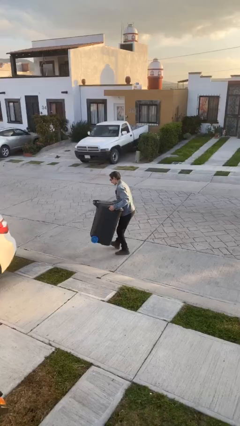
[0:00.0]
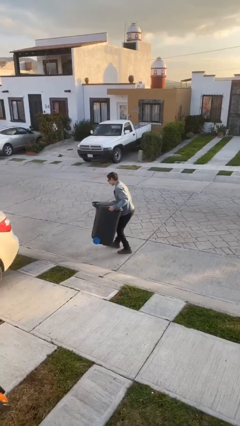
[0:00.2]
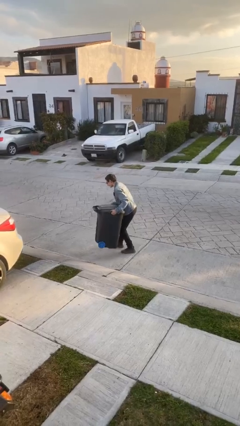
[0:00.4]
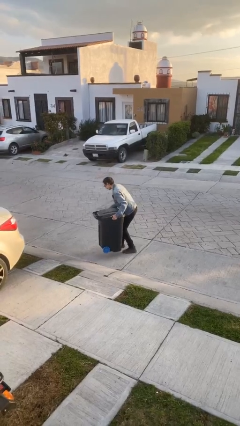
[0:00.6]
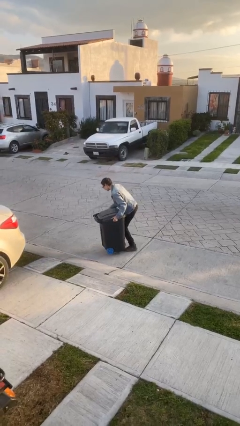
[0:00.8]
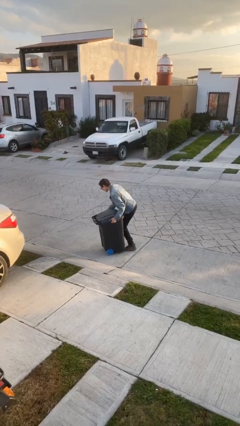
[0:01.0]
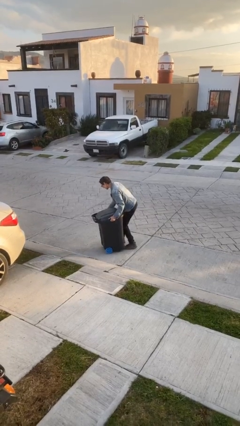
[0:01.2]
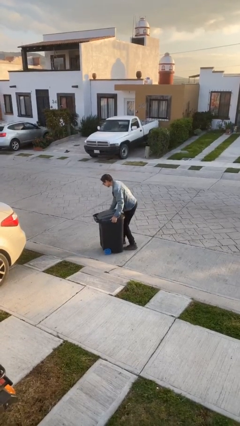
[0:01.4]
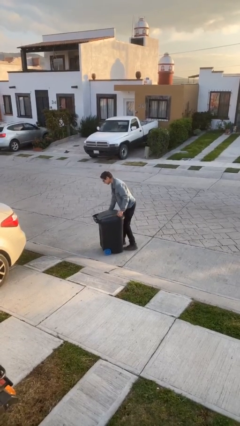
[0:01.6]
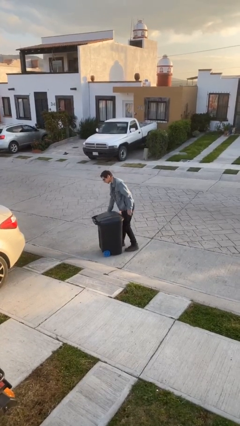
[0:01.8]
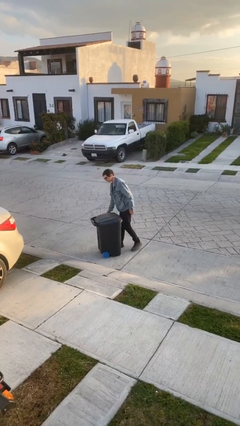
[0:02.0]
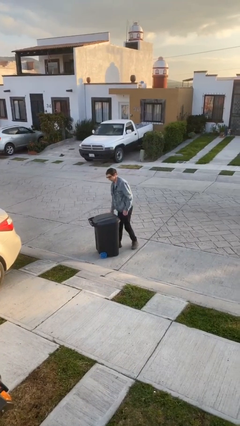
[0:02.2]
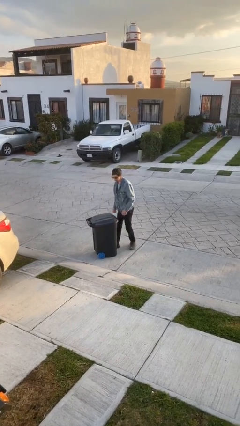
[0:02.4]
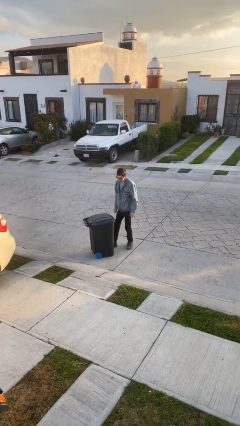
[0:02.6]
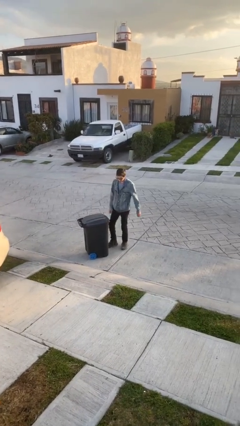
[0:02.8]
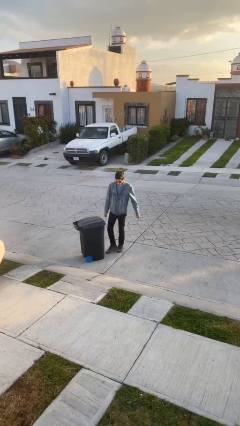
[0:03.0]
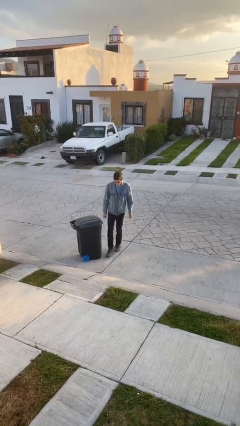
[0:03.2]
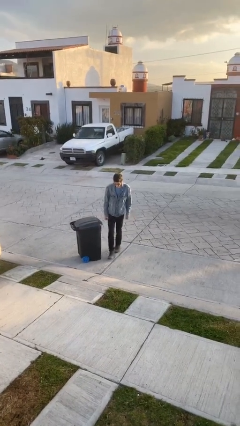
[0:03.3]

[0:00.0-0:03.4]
person puts down object on floor

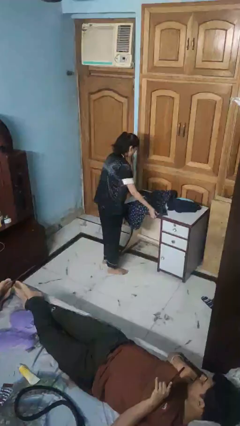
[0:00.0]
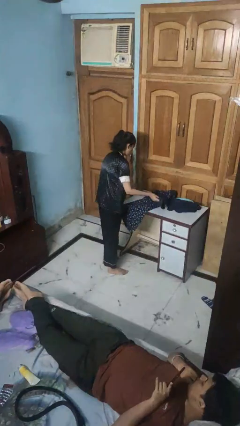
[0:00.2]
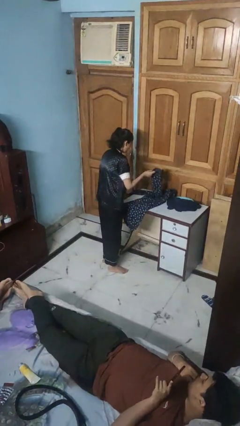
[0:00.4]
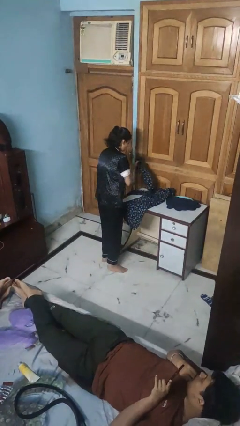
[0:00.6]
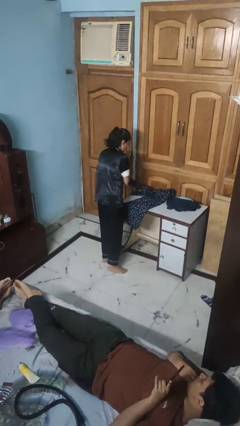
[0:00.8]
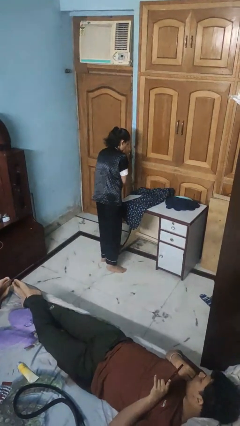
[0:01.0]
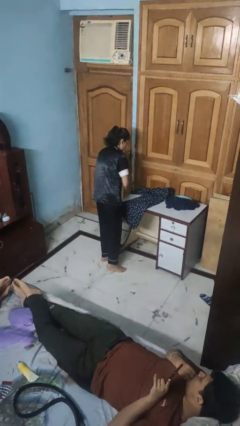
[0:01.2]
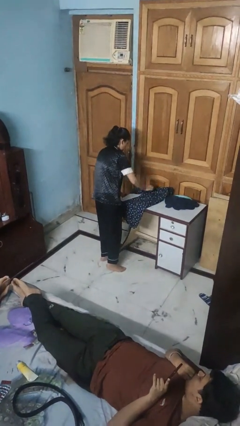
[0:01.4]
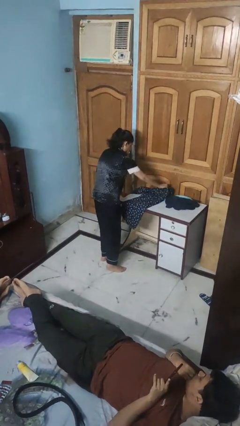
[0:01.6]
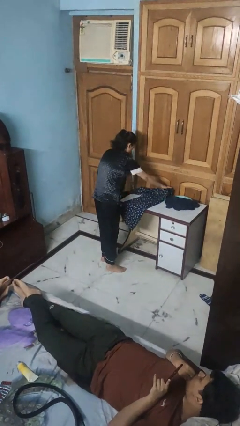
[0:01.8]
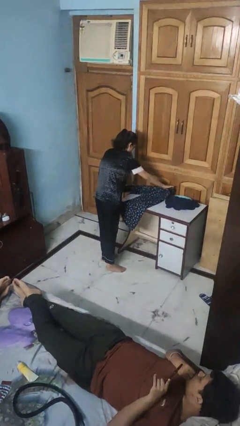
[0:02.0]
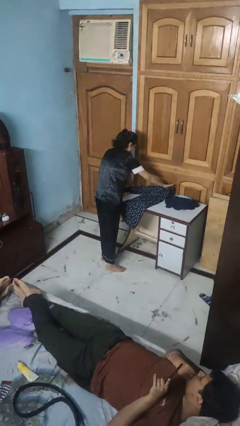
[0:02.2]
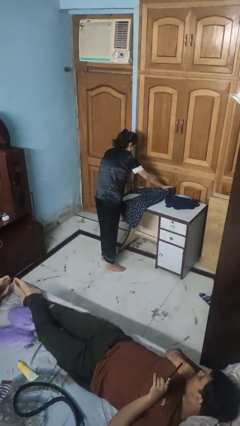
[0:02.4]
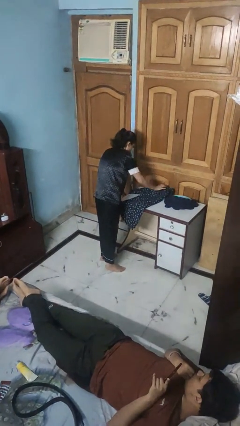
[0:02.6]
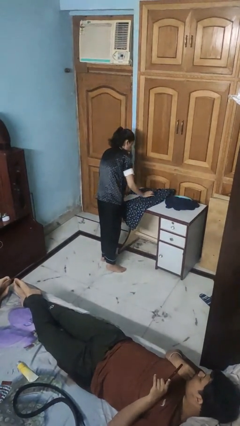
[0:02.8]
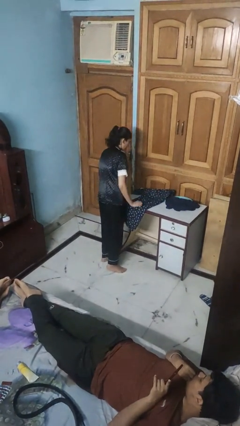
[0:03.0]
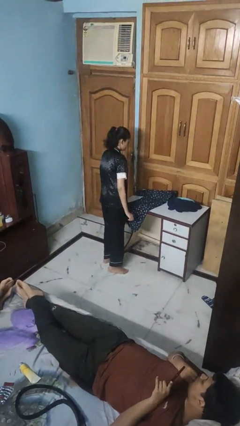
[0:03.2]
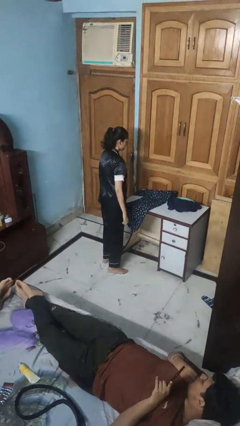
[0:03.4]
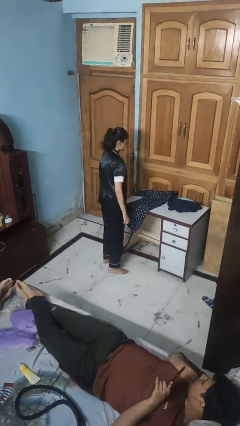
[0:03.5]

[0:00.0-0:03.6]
person folds shirt

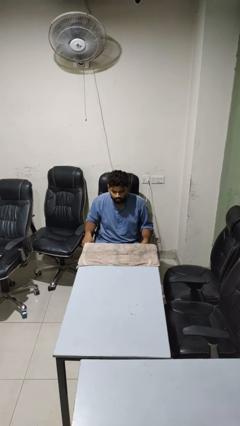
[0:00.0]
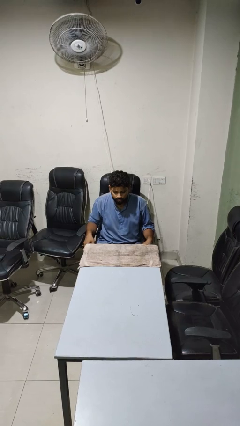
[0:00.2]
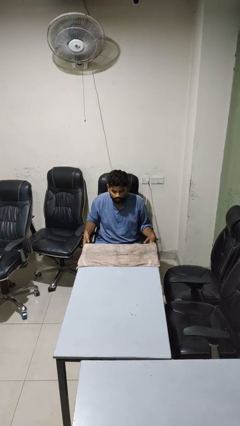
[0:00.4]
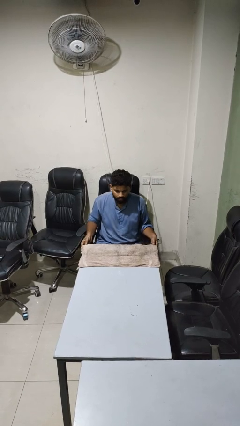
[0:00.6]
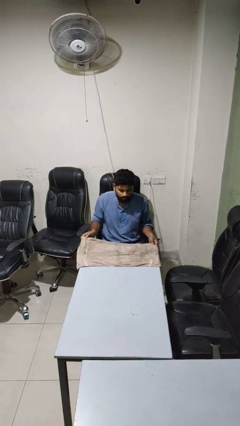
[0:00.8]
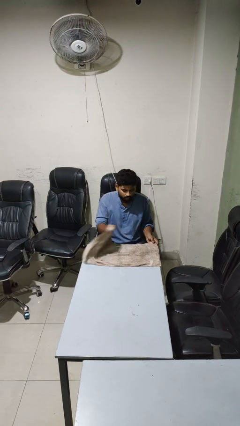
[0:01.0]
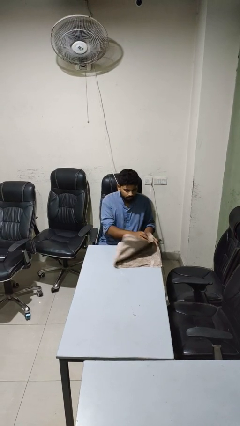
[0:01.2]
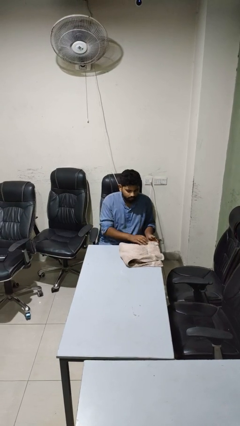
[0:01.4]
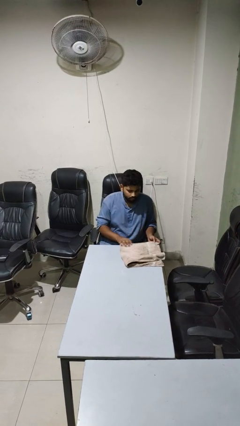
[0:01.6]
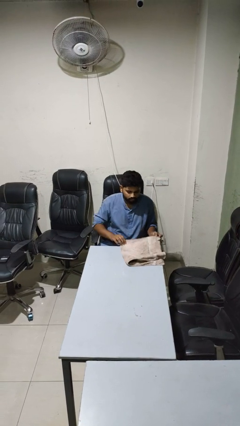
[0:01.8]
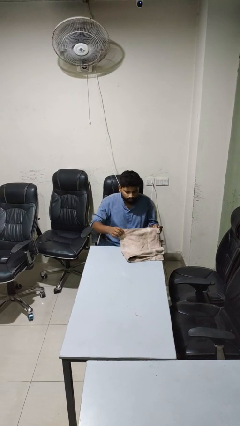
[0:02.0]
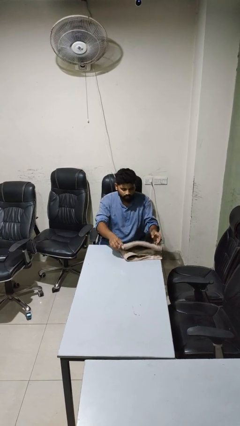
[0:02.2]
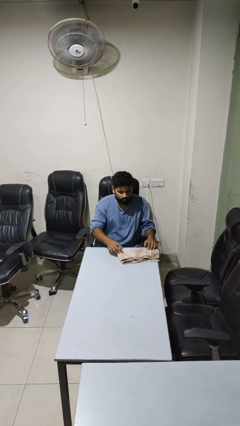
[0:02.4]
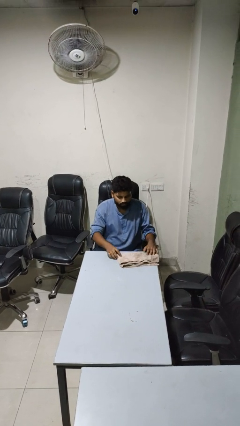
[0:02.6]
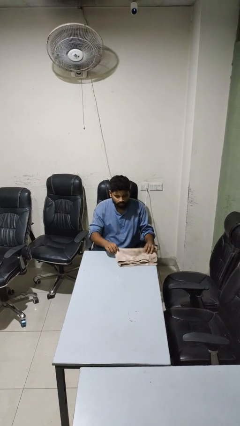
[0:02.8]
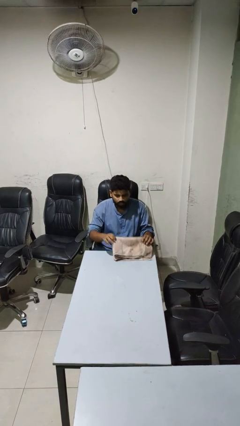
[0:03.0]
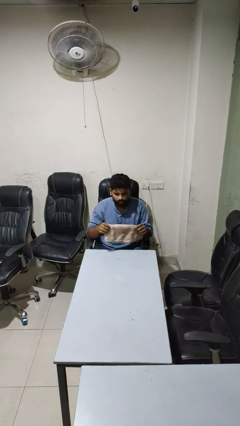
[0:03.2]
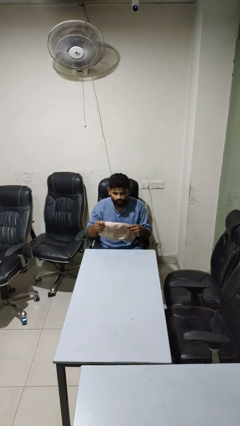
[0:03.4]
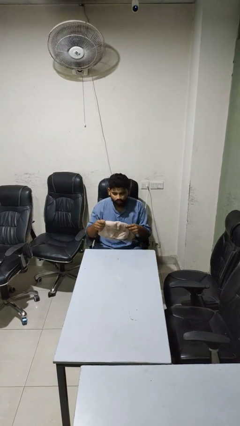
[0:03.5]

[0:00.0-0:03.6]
person folds tablecloth

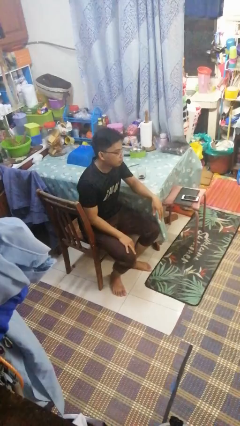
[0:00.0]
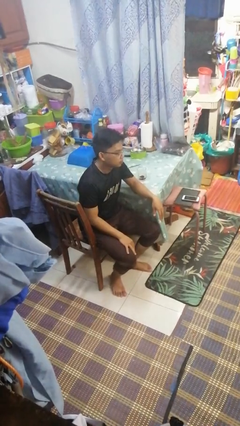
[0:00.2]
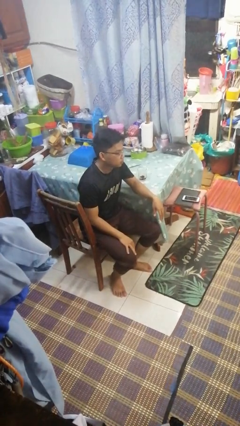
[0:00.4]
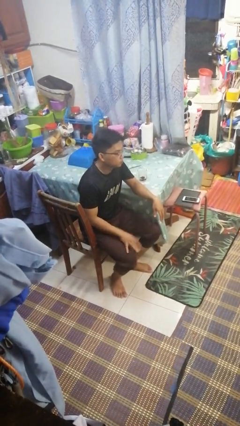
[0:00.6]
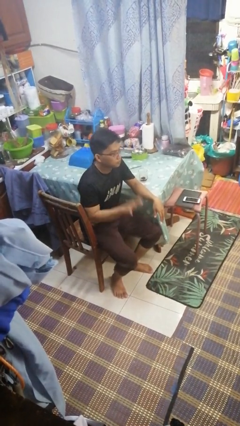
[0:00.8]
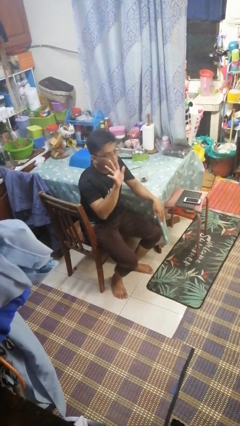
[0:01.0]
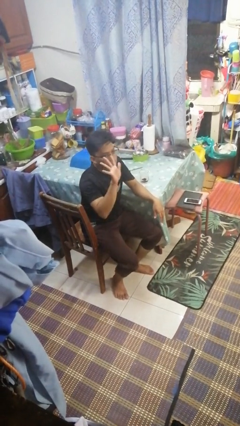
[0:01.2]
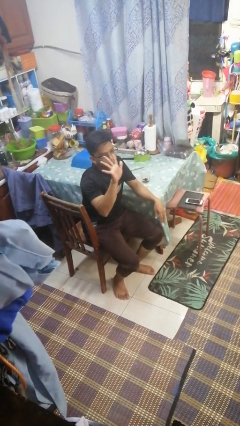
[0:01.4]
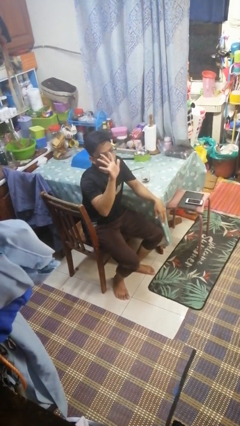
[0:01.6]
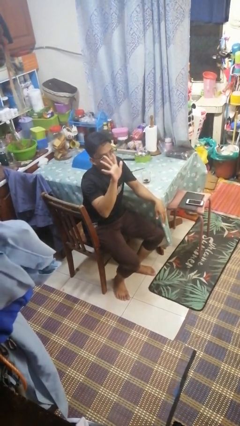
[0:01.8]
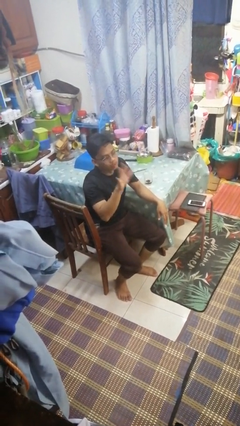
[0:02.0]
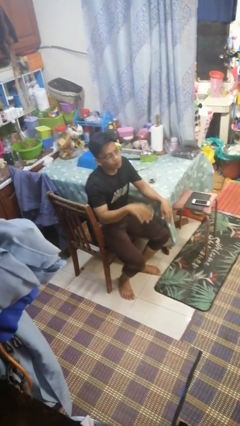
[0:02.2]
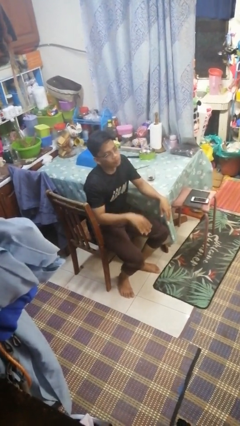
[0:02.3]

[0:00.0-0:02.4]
person gestures number five

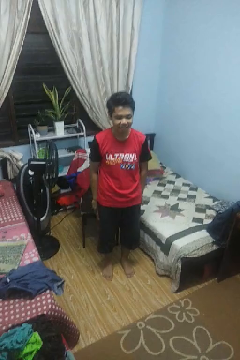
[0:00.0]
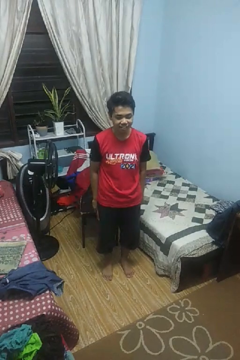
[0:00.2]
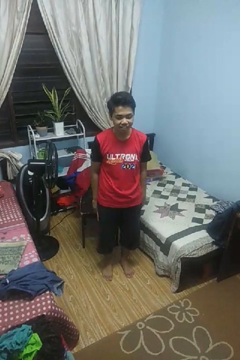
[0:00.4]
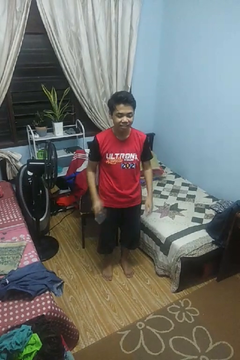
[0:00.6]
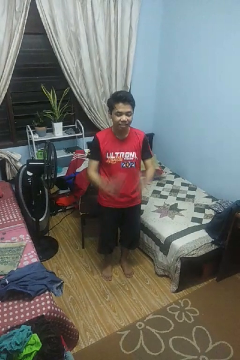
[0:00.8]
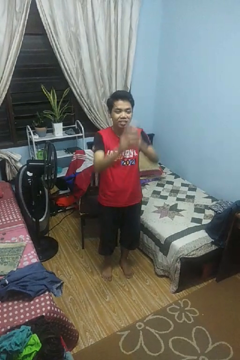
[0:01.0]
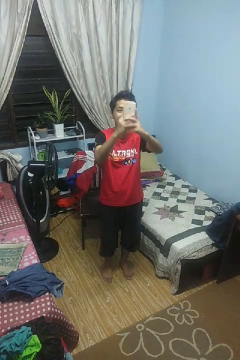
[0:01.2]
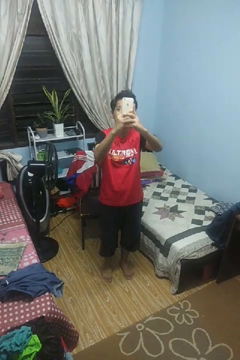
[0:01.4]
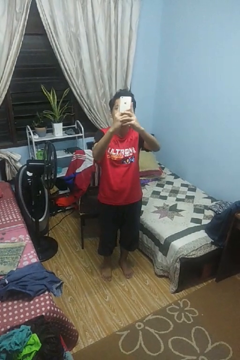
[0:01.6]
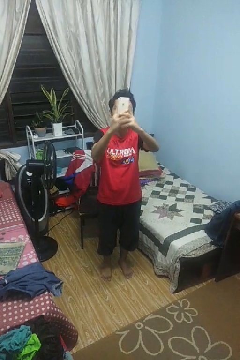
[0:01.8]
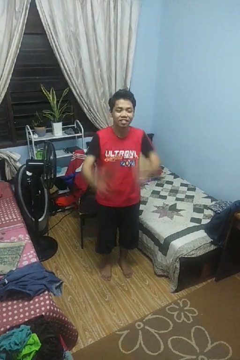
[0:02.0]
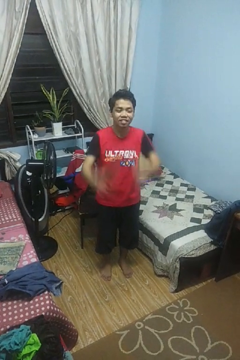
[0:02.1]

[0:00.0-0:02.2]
person takes selfie

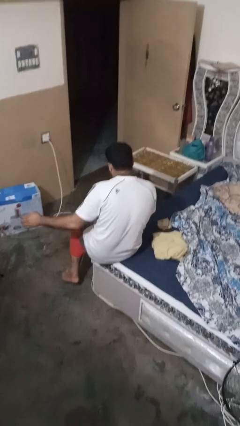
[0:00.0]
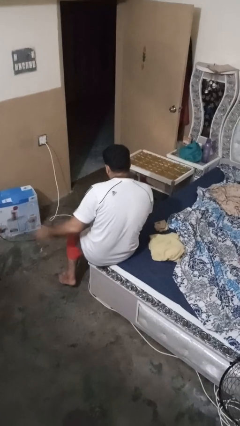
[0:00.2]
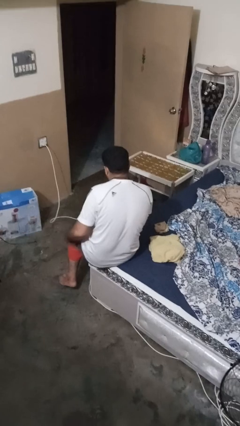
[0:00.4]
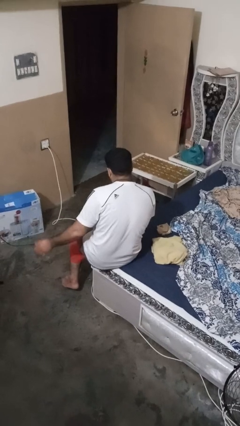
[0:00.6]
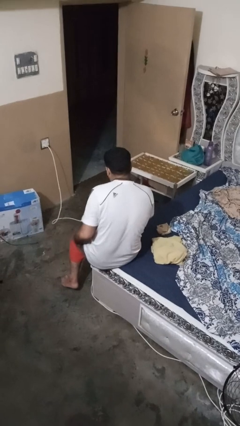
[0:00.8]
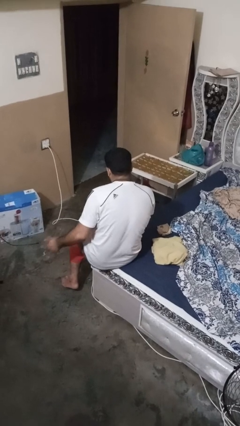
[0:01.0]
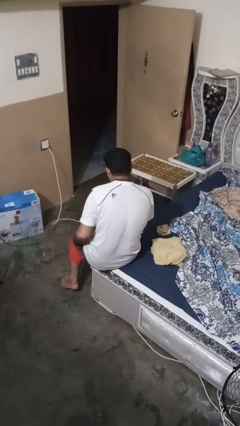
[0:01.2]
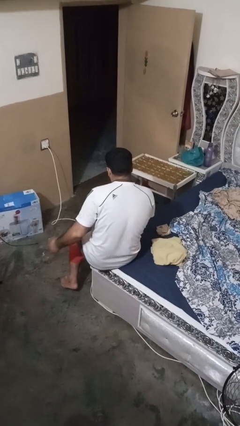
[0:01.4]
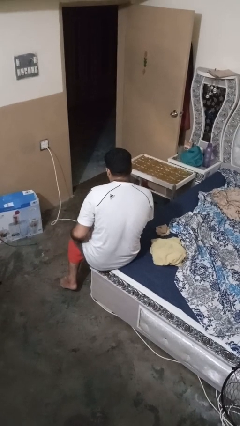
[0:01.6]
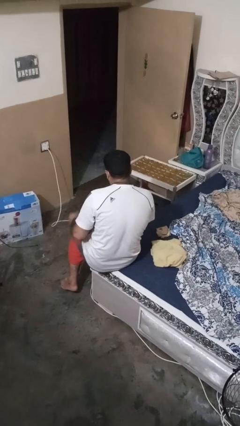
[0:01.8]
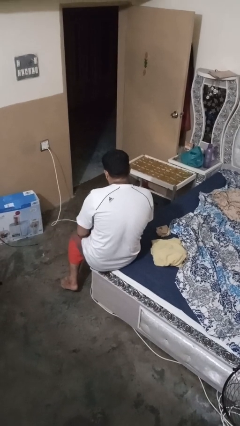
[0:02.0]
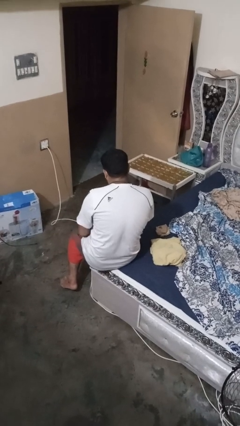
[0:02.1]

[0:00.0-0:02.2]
person slaps hands on thighs

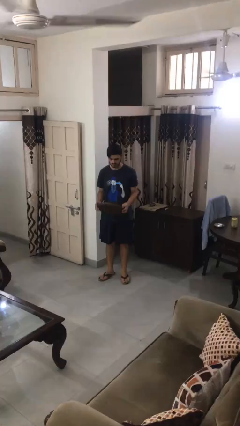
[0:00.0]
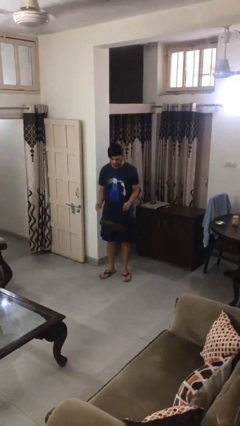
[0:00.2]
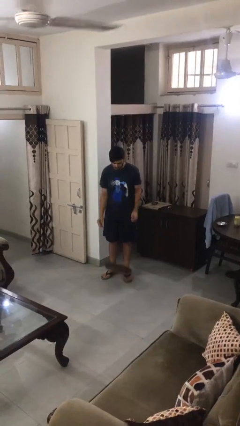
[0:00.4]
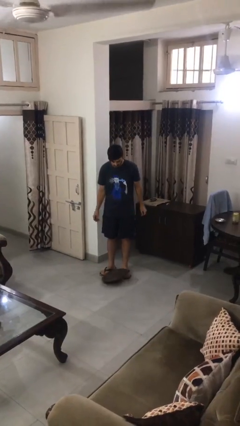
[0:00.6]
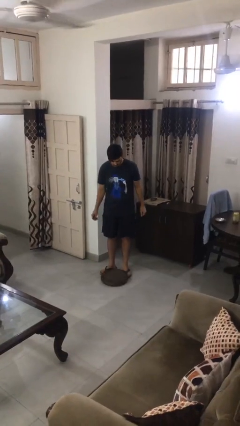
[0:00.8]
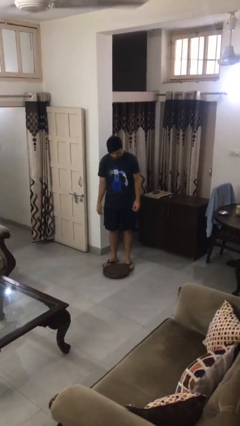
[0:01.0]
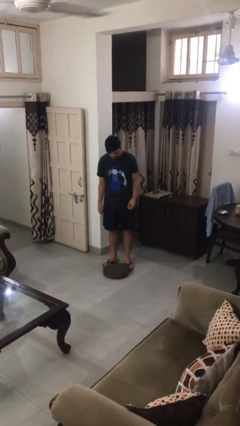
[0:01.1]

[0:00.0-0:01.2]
person drops object
